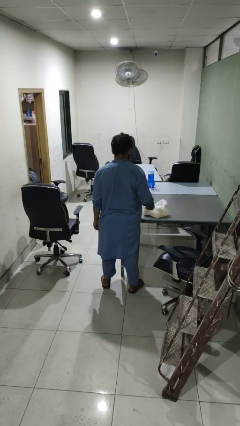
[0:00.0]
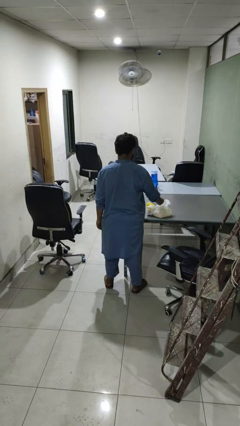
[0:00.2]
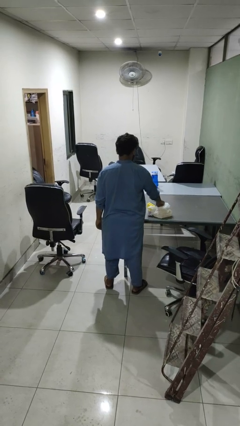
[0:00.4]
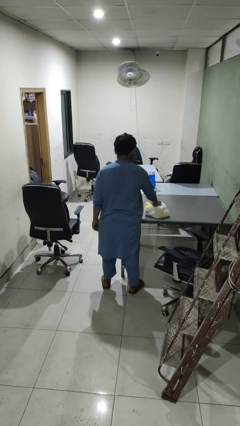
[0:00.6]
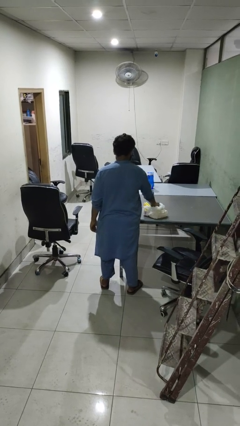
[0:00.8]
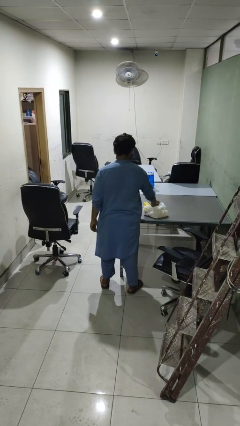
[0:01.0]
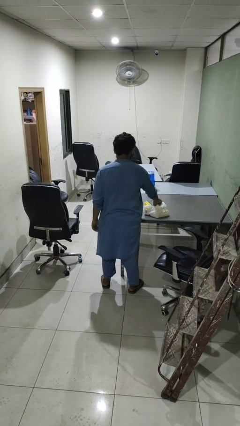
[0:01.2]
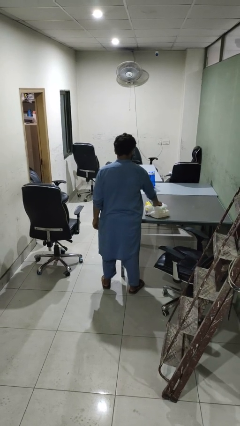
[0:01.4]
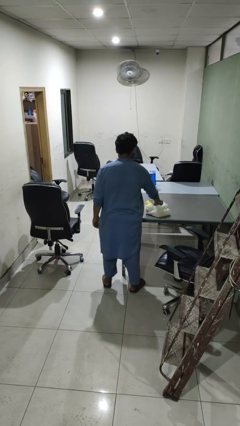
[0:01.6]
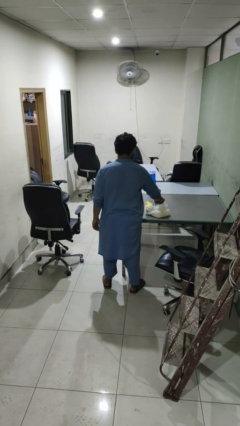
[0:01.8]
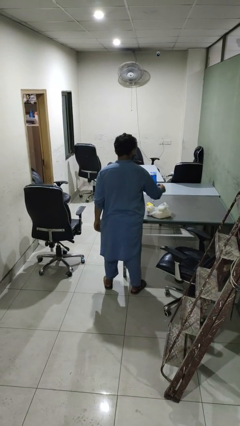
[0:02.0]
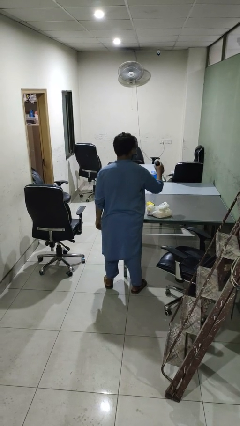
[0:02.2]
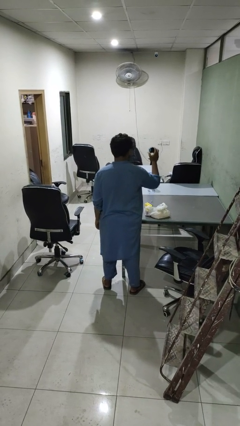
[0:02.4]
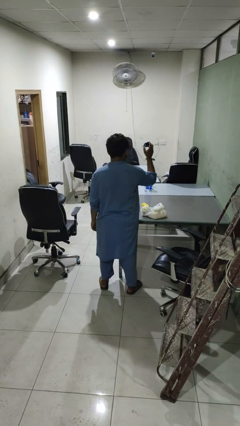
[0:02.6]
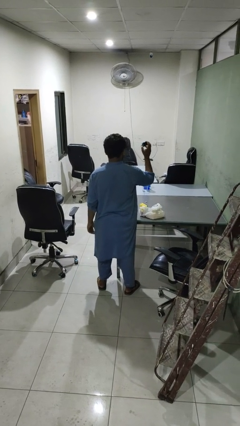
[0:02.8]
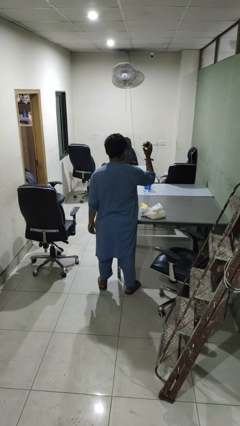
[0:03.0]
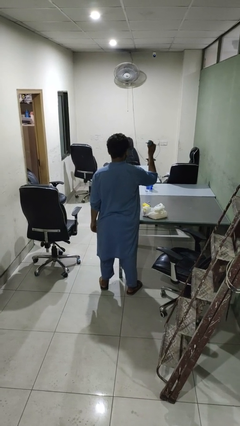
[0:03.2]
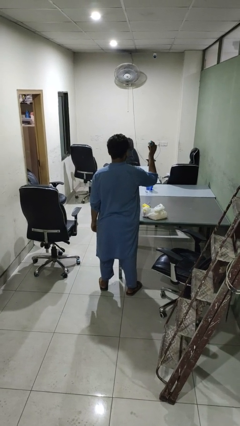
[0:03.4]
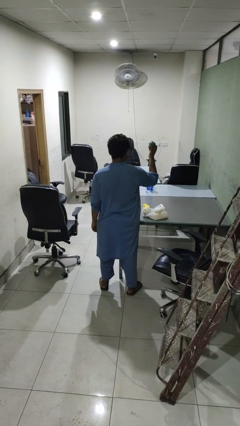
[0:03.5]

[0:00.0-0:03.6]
person takes object from bag

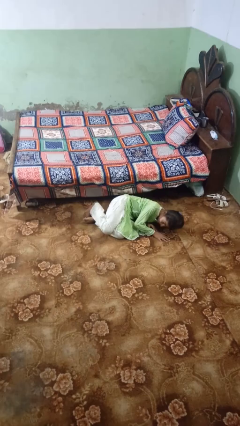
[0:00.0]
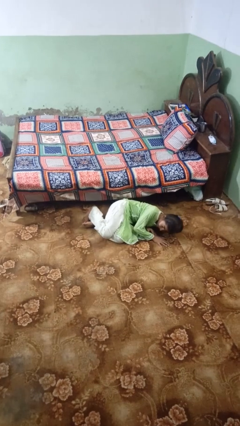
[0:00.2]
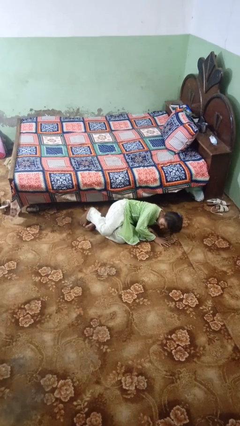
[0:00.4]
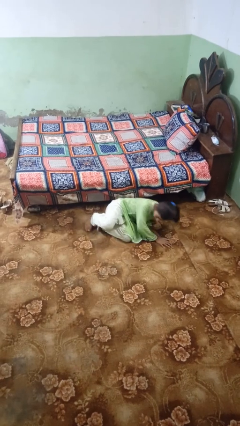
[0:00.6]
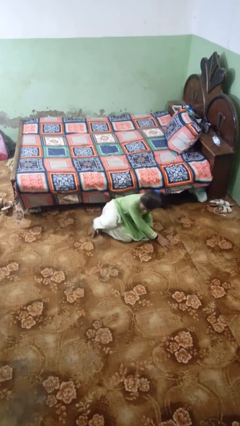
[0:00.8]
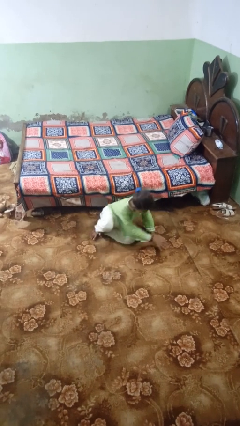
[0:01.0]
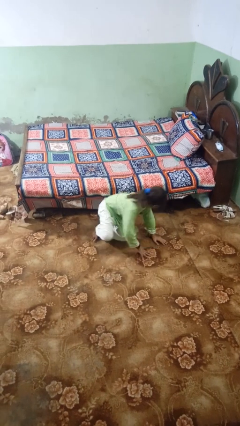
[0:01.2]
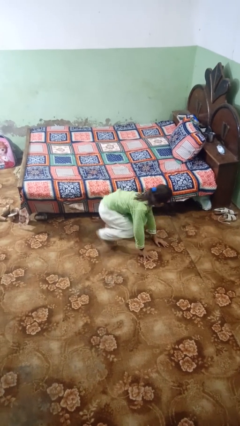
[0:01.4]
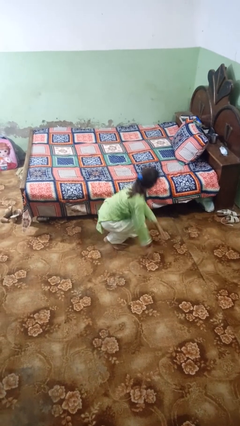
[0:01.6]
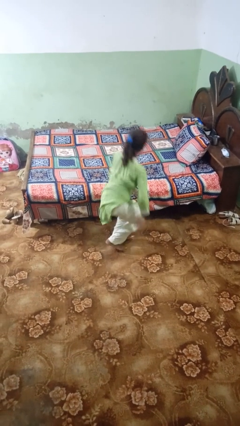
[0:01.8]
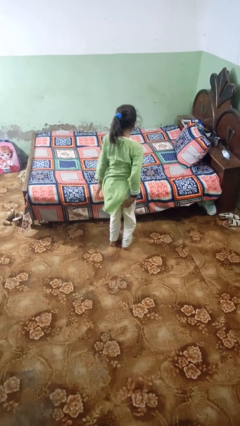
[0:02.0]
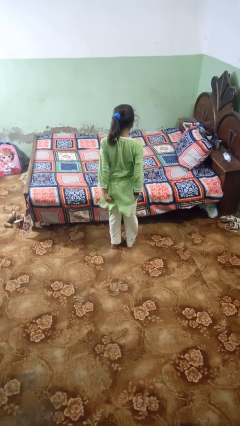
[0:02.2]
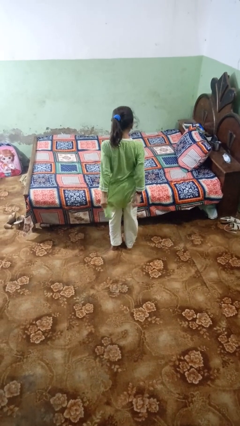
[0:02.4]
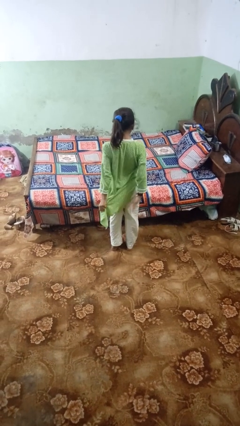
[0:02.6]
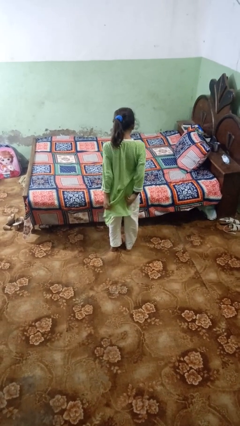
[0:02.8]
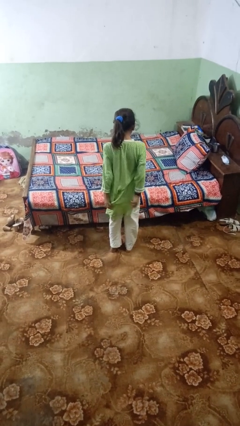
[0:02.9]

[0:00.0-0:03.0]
person stands up from floor

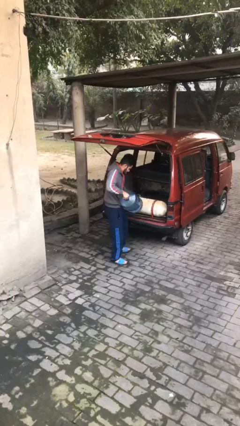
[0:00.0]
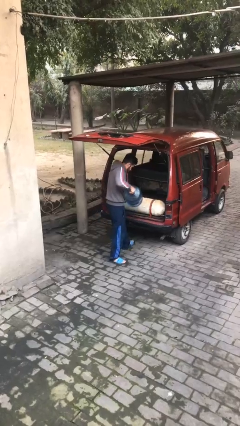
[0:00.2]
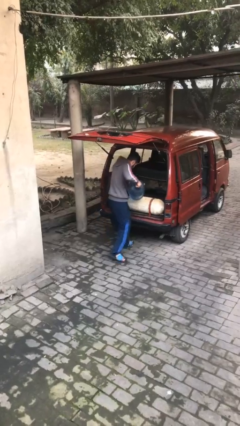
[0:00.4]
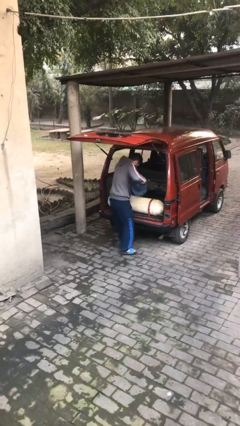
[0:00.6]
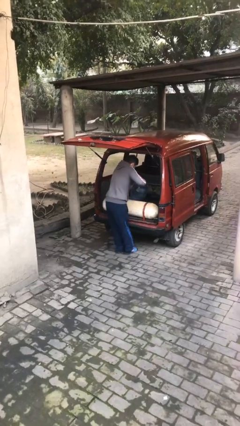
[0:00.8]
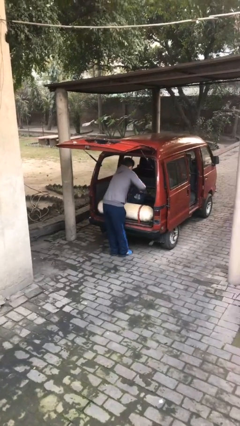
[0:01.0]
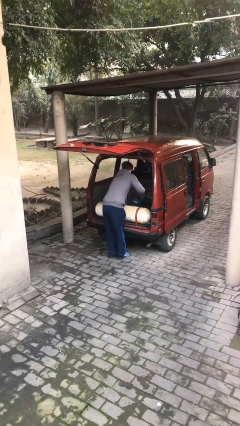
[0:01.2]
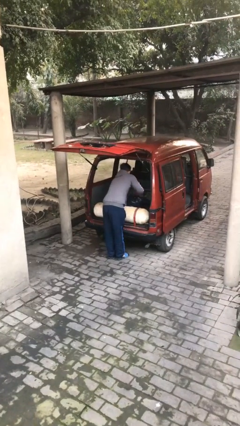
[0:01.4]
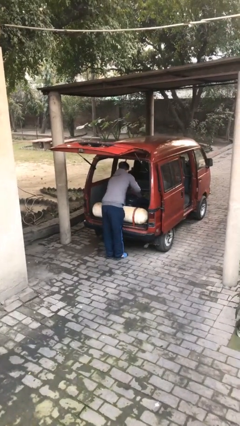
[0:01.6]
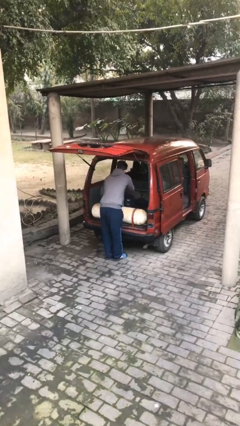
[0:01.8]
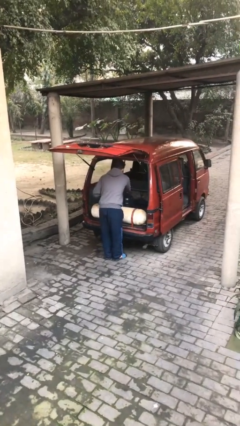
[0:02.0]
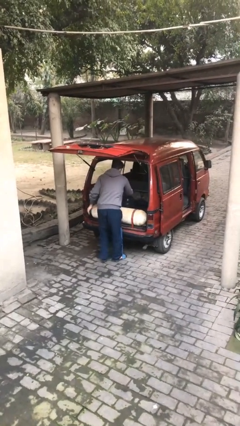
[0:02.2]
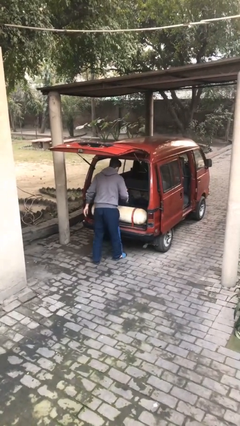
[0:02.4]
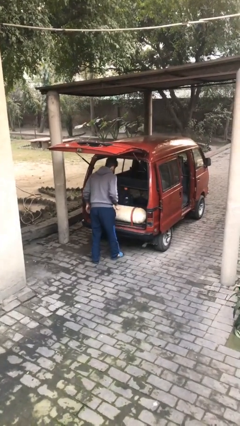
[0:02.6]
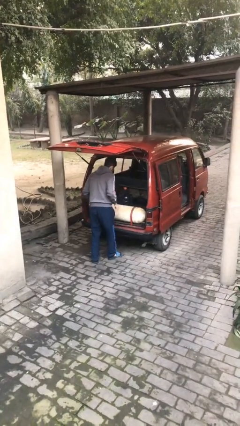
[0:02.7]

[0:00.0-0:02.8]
person loads car

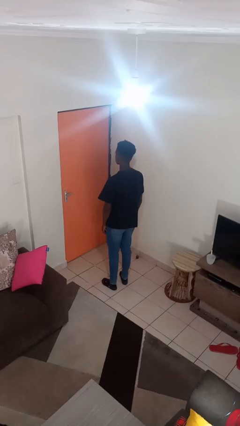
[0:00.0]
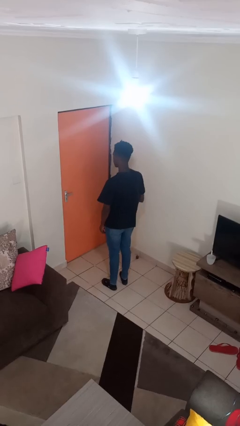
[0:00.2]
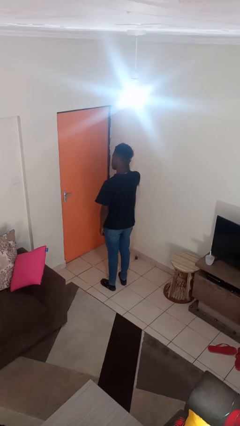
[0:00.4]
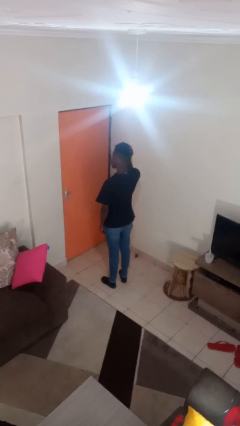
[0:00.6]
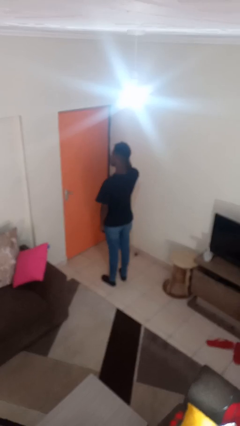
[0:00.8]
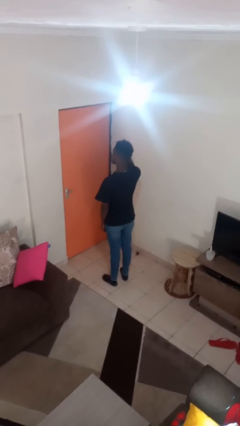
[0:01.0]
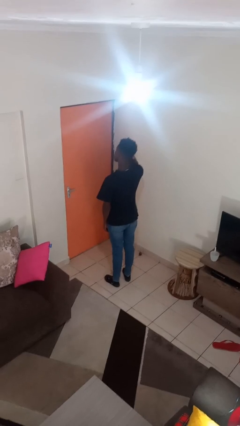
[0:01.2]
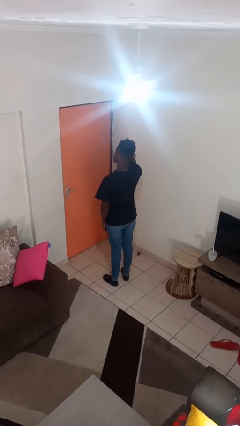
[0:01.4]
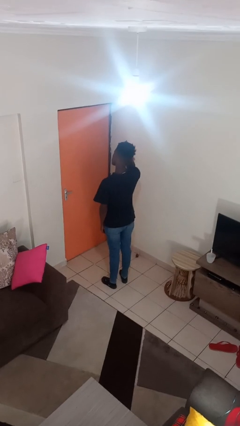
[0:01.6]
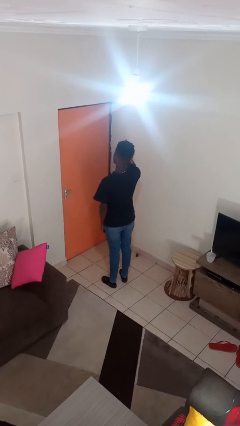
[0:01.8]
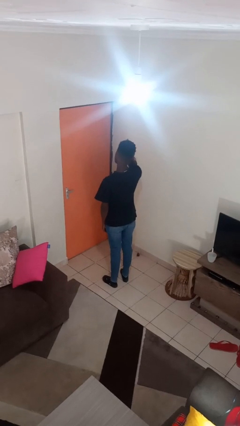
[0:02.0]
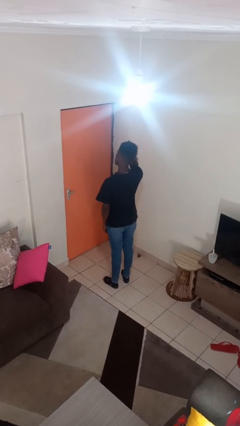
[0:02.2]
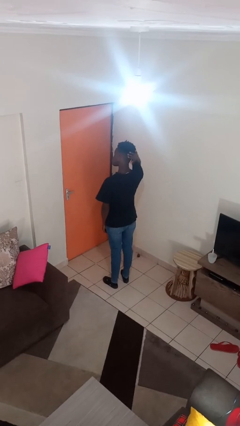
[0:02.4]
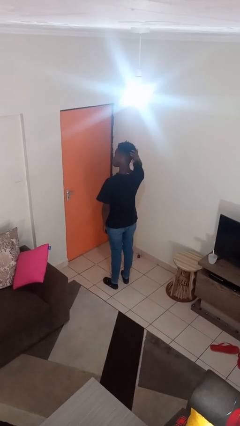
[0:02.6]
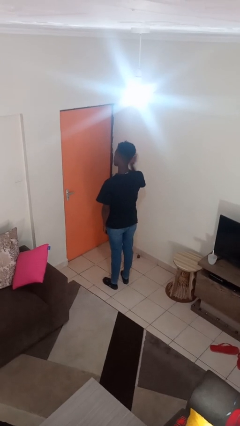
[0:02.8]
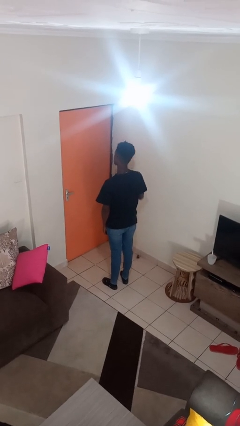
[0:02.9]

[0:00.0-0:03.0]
person strokes hair

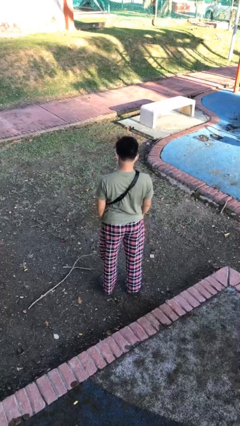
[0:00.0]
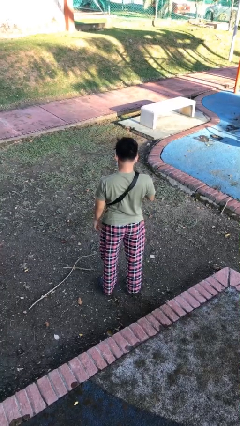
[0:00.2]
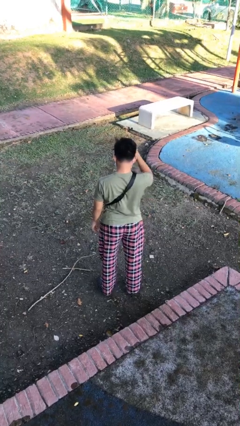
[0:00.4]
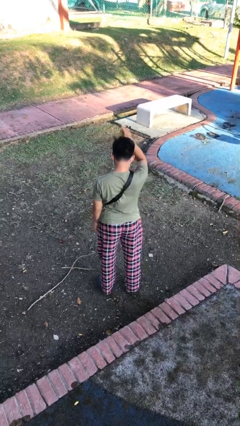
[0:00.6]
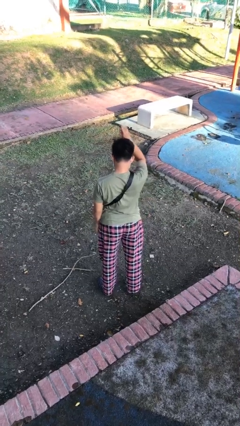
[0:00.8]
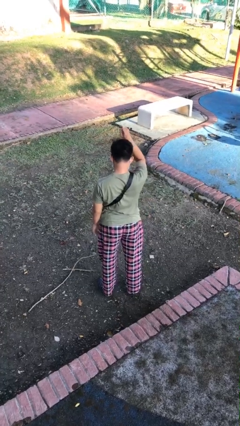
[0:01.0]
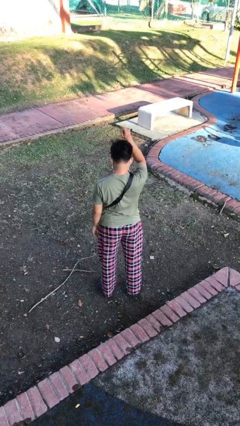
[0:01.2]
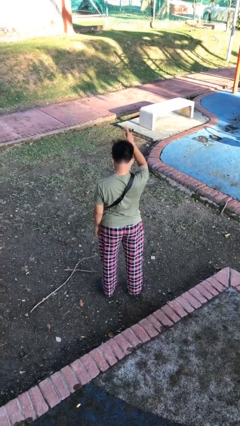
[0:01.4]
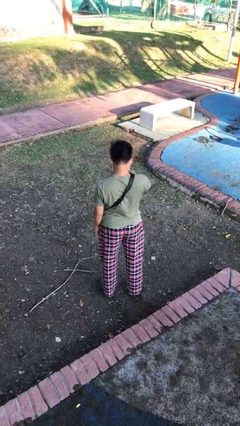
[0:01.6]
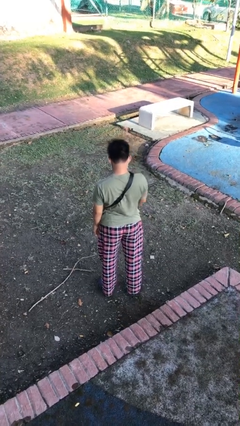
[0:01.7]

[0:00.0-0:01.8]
person gestures number one

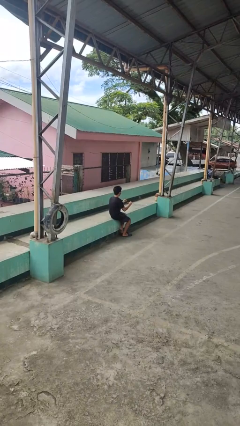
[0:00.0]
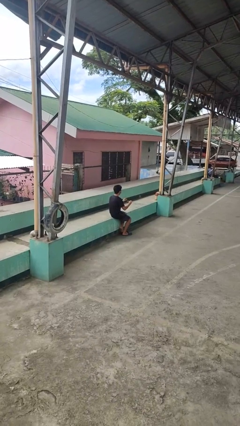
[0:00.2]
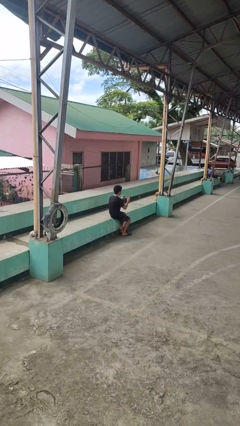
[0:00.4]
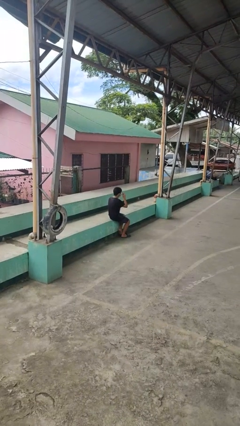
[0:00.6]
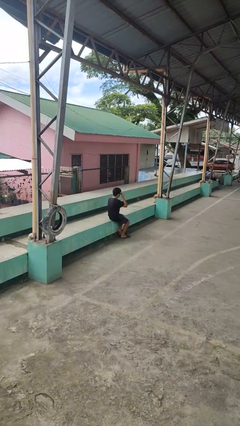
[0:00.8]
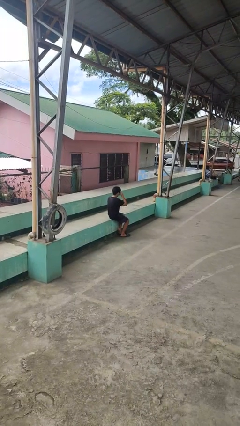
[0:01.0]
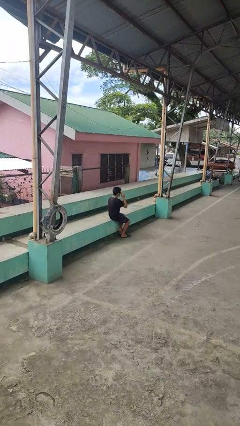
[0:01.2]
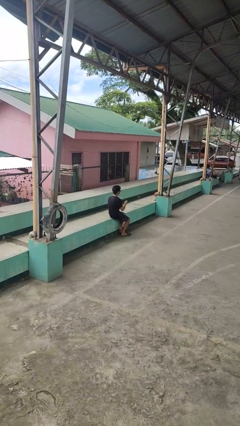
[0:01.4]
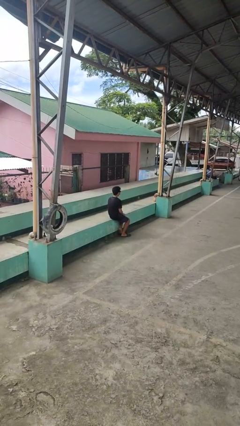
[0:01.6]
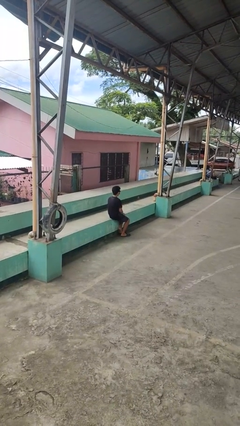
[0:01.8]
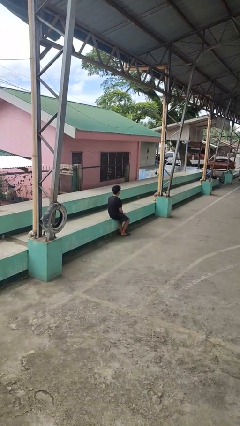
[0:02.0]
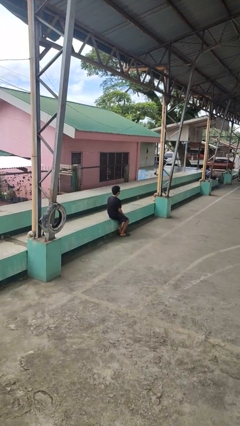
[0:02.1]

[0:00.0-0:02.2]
person puts on sunglasses

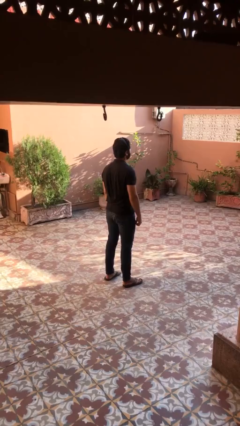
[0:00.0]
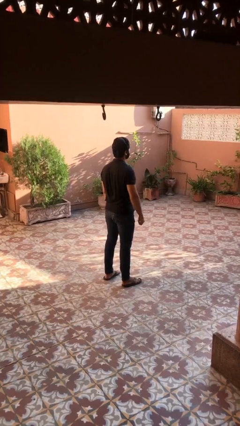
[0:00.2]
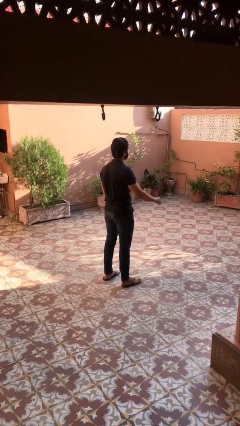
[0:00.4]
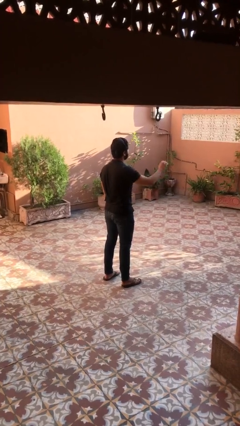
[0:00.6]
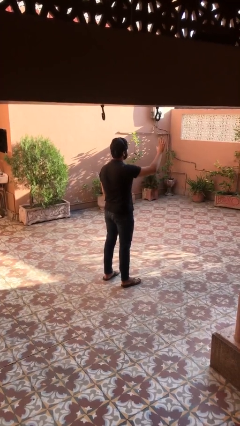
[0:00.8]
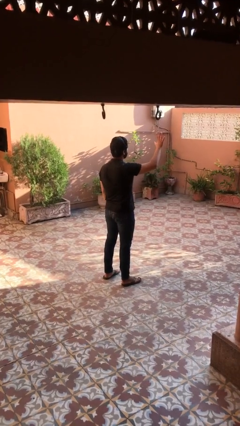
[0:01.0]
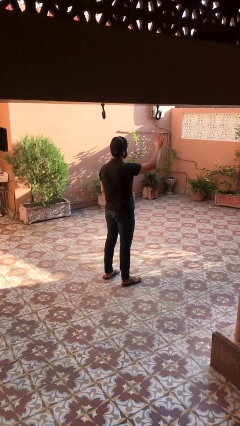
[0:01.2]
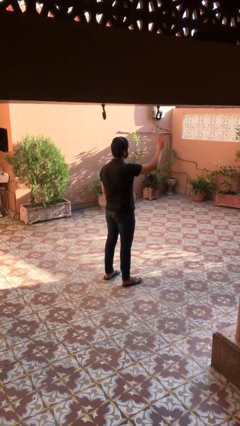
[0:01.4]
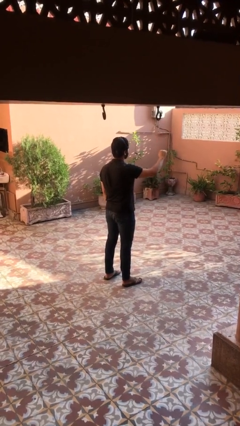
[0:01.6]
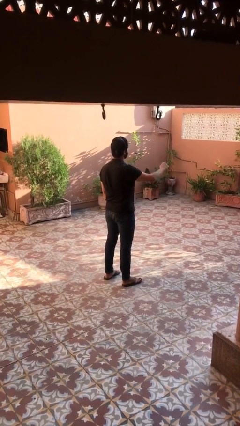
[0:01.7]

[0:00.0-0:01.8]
person gestures number five
